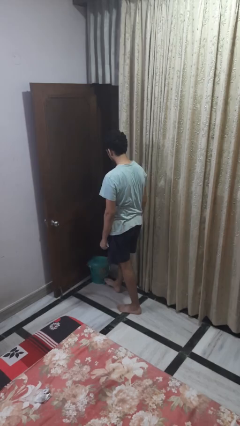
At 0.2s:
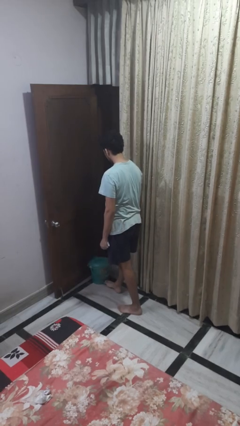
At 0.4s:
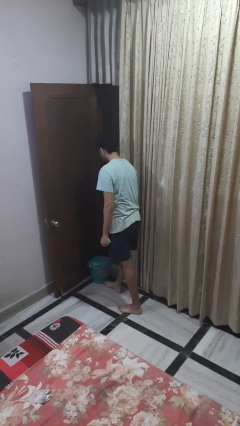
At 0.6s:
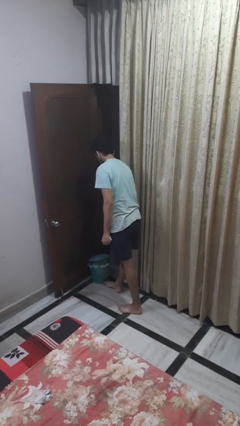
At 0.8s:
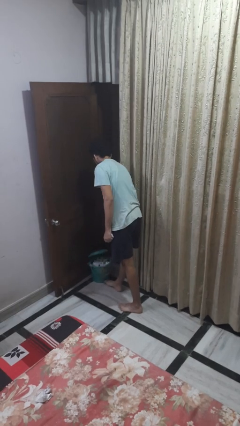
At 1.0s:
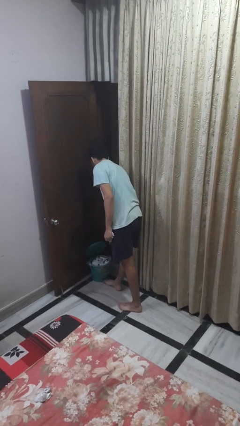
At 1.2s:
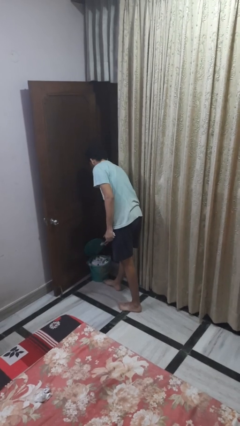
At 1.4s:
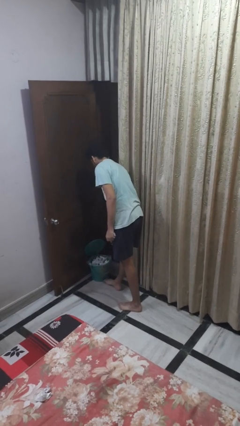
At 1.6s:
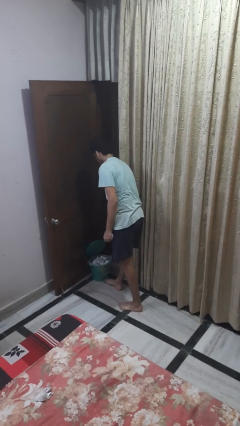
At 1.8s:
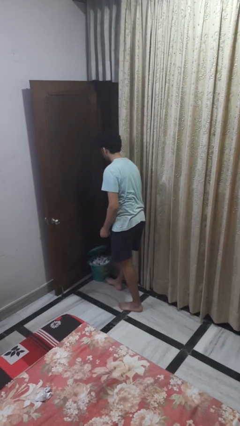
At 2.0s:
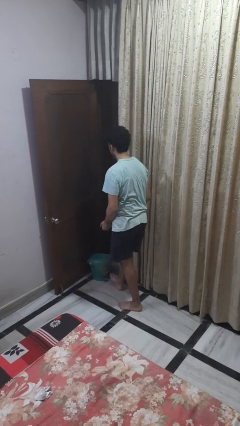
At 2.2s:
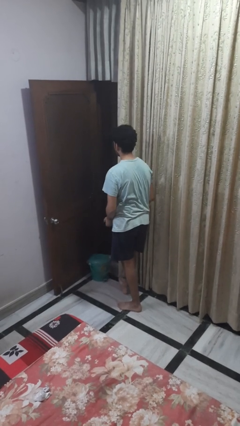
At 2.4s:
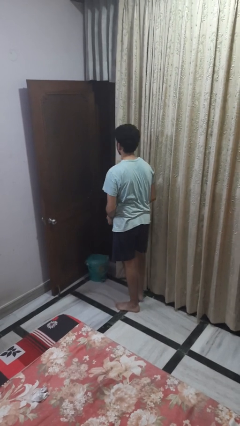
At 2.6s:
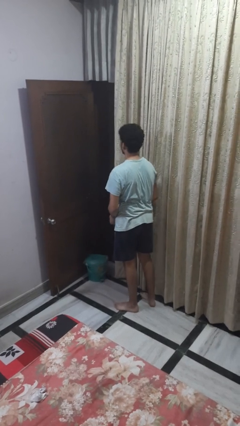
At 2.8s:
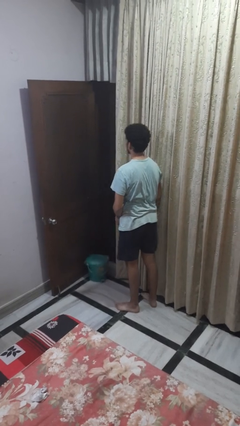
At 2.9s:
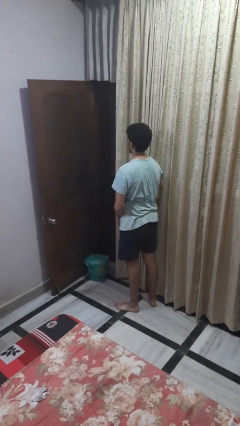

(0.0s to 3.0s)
person discards trash

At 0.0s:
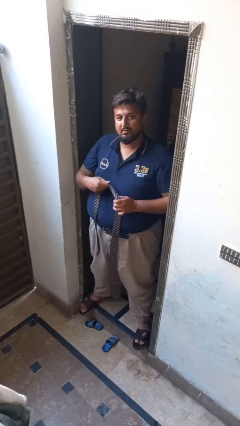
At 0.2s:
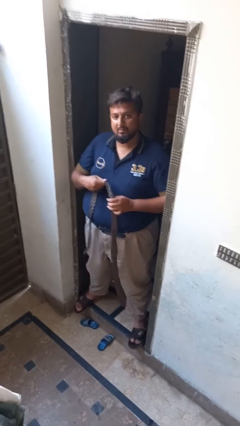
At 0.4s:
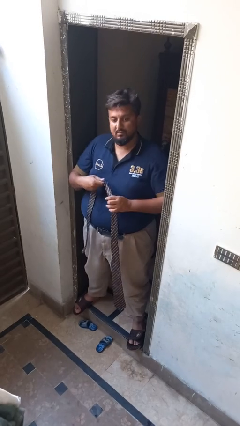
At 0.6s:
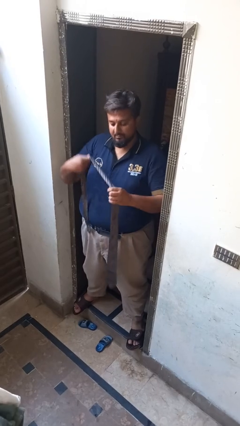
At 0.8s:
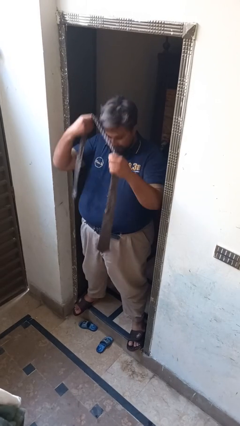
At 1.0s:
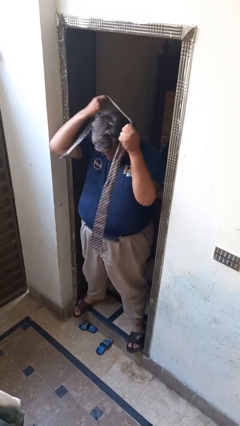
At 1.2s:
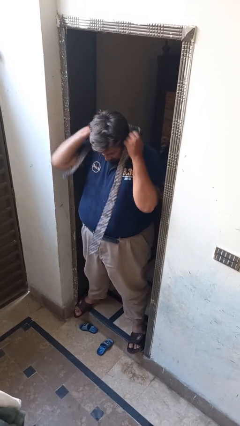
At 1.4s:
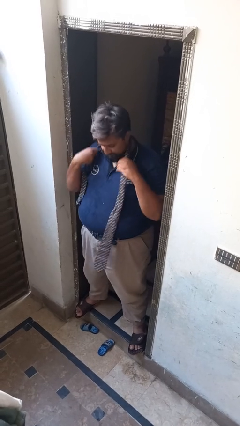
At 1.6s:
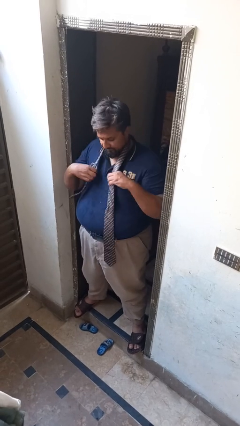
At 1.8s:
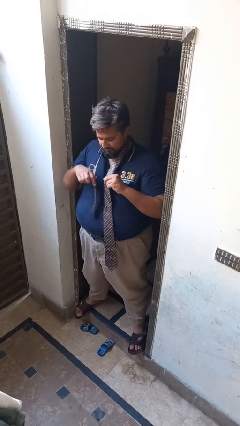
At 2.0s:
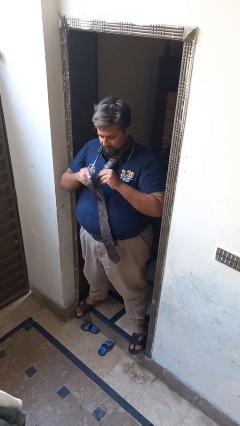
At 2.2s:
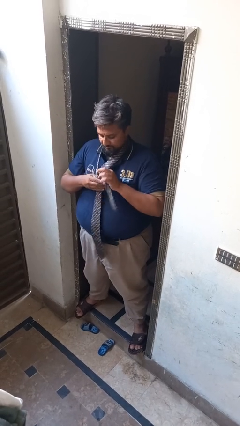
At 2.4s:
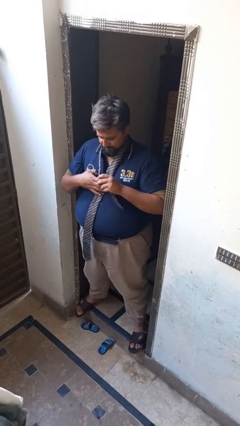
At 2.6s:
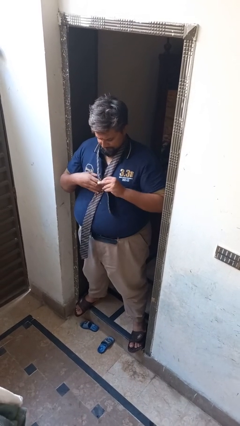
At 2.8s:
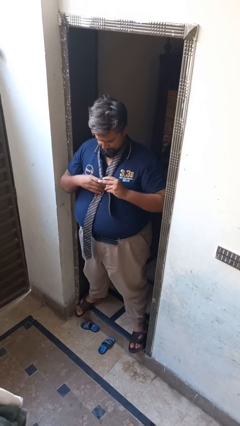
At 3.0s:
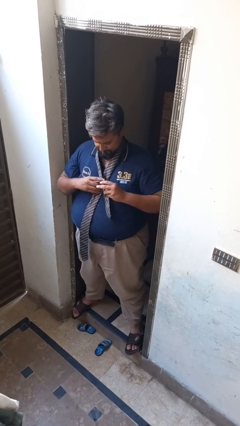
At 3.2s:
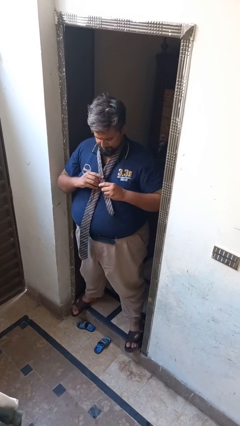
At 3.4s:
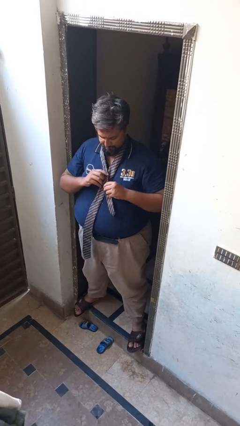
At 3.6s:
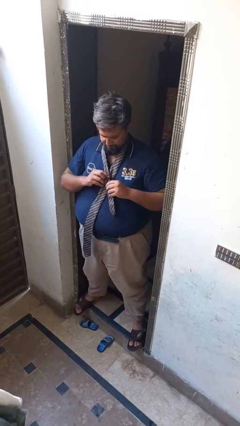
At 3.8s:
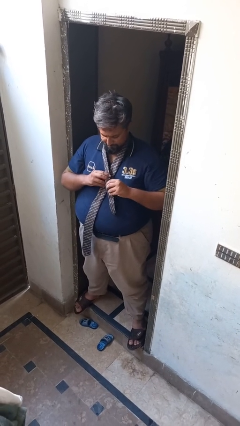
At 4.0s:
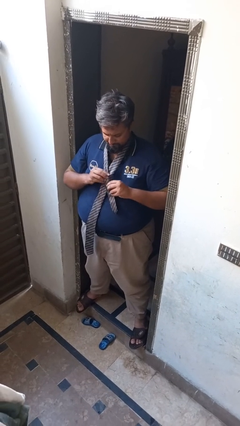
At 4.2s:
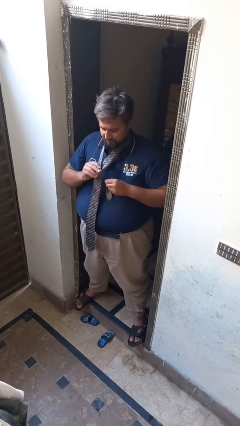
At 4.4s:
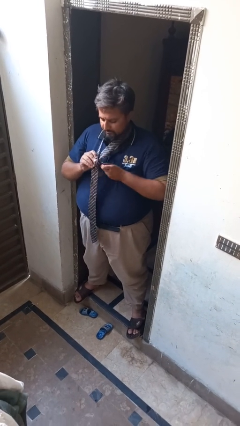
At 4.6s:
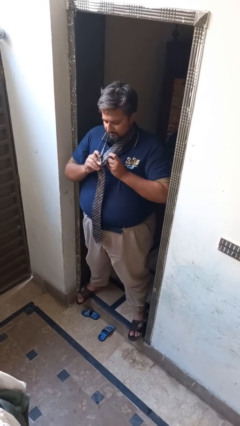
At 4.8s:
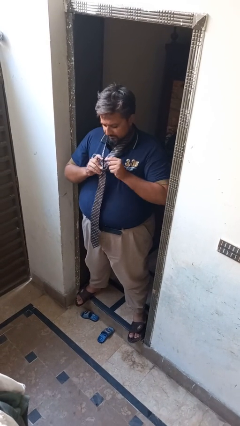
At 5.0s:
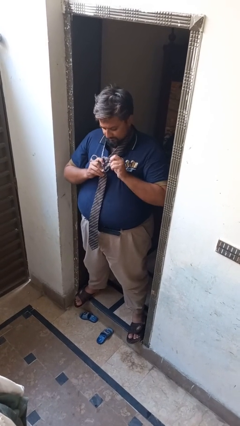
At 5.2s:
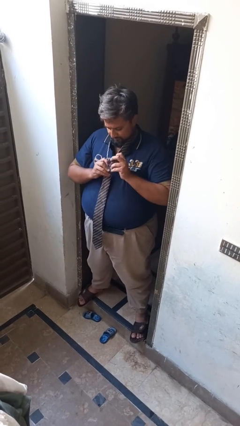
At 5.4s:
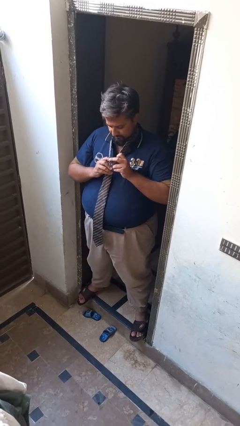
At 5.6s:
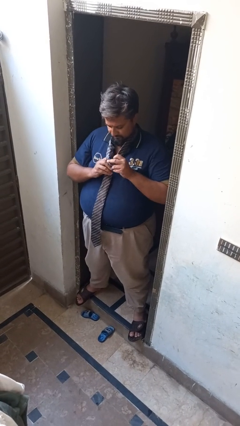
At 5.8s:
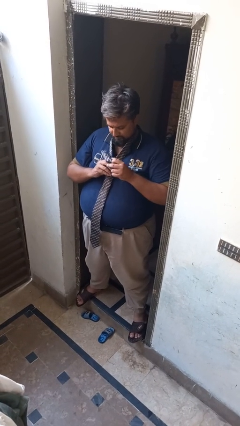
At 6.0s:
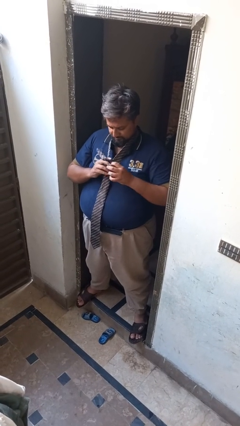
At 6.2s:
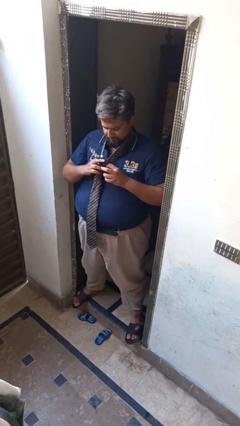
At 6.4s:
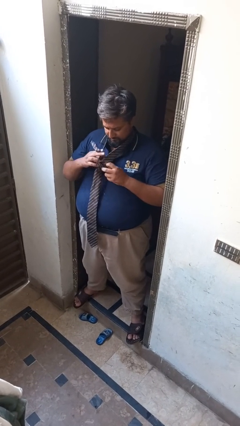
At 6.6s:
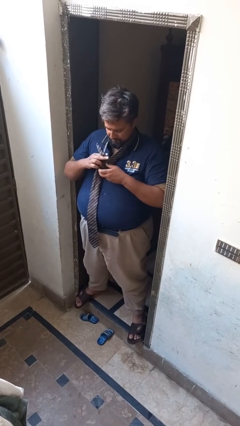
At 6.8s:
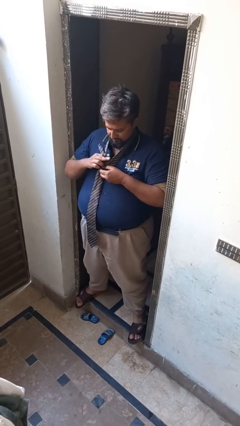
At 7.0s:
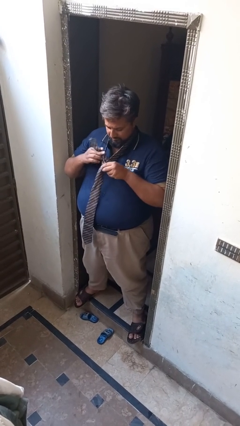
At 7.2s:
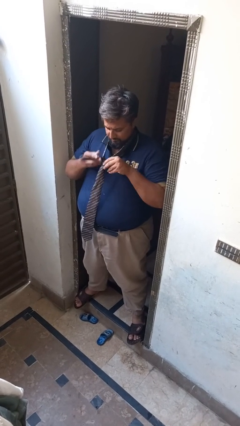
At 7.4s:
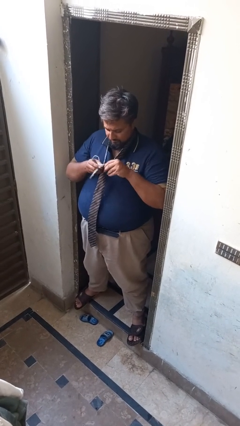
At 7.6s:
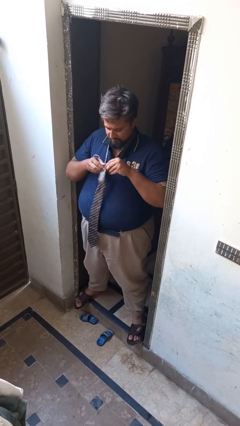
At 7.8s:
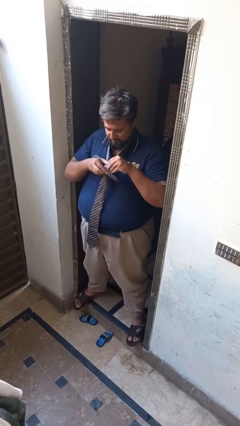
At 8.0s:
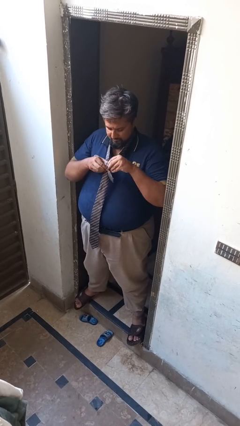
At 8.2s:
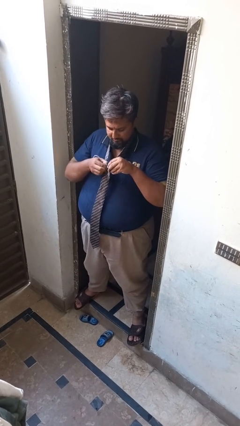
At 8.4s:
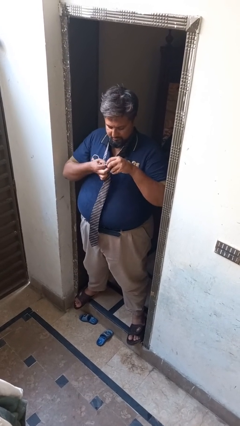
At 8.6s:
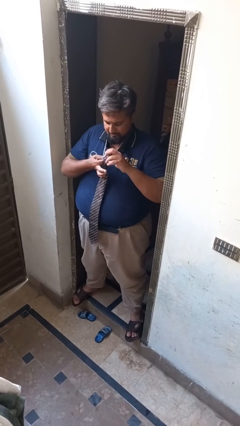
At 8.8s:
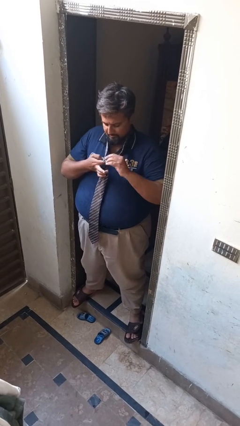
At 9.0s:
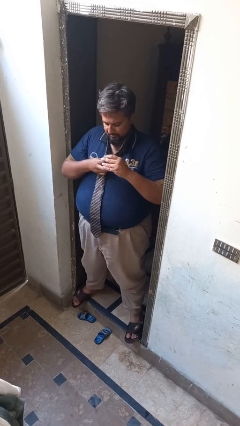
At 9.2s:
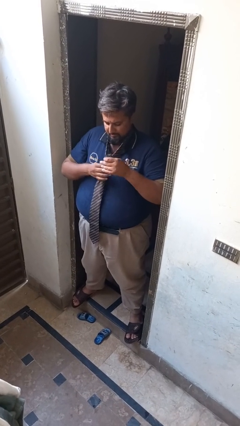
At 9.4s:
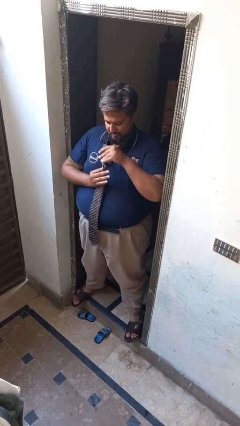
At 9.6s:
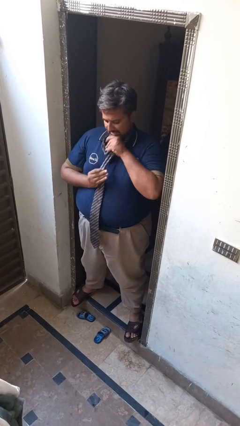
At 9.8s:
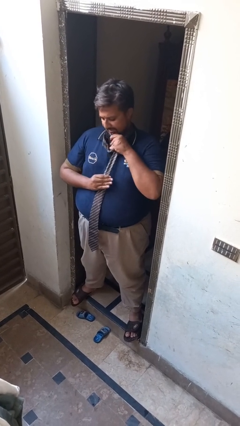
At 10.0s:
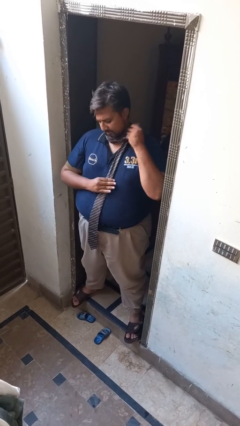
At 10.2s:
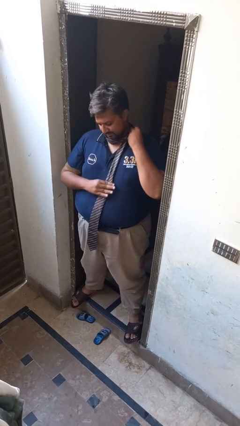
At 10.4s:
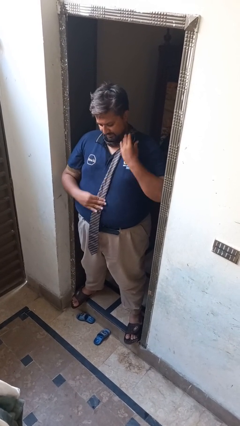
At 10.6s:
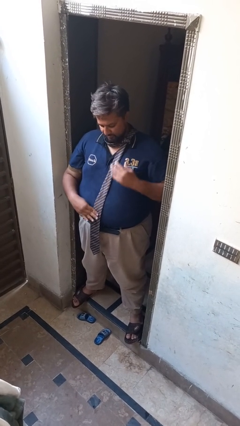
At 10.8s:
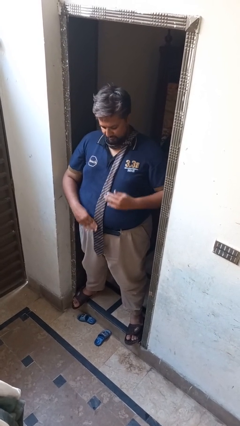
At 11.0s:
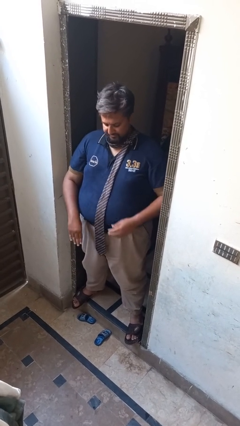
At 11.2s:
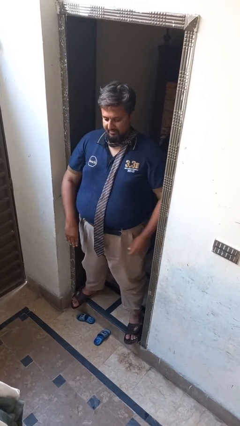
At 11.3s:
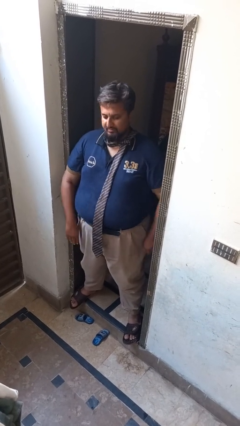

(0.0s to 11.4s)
person puts on necktie

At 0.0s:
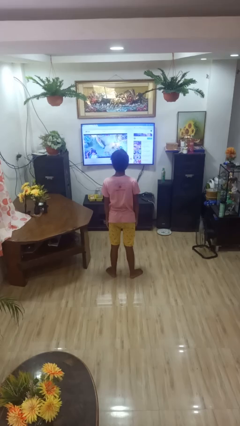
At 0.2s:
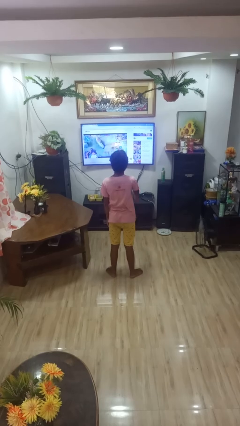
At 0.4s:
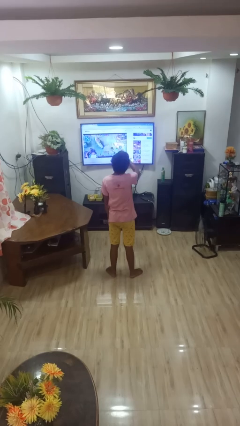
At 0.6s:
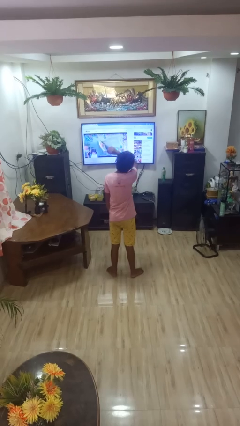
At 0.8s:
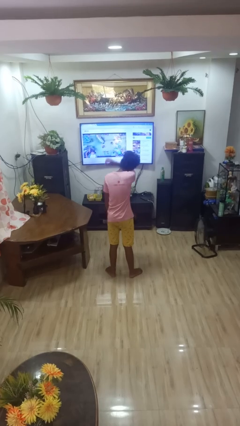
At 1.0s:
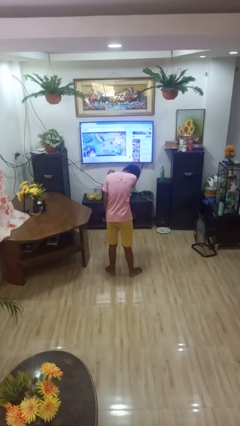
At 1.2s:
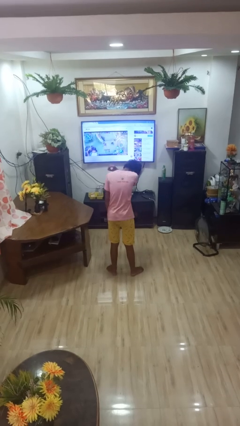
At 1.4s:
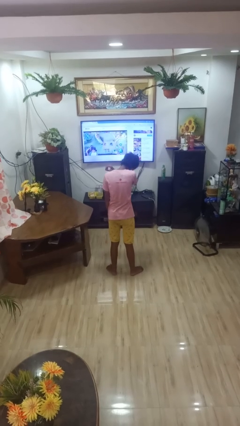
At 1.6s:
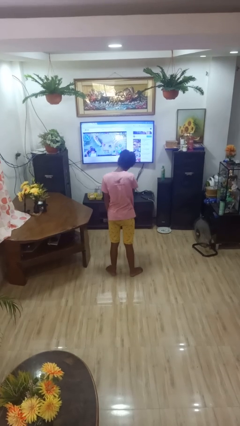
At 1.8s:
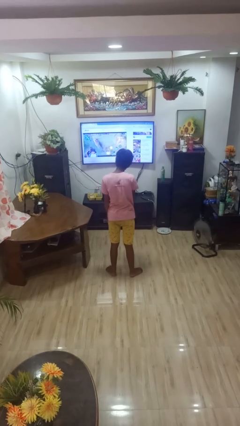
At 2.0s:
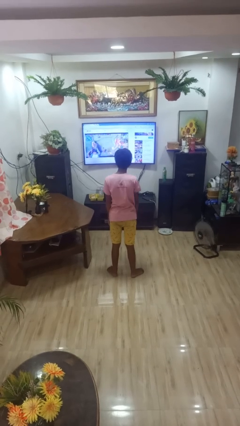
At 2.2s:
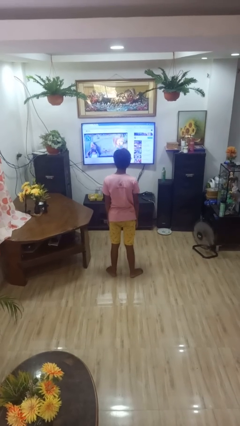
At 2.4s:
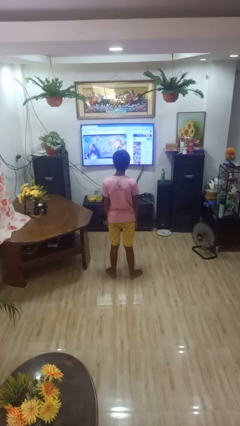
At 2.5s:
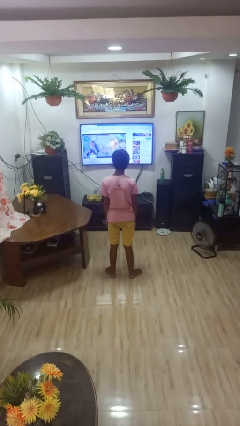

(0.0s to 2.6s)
person sneezes into arm

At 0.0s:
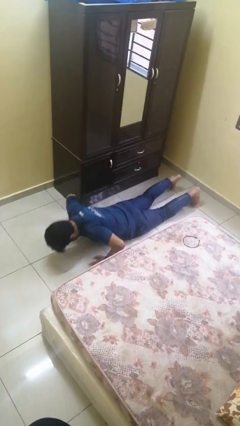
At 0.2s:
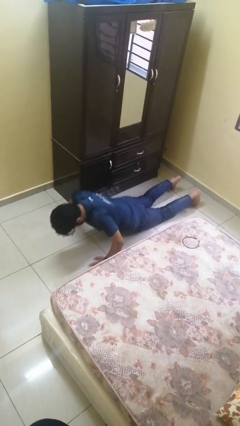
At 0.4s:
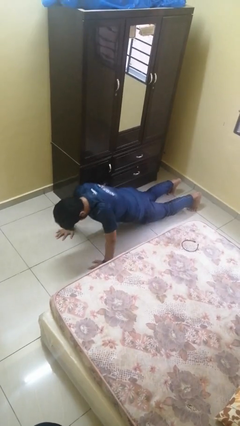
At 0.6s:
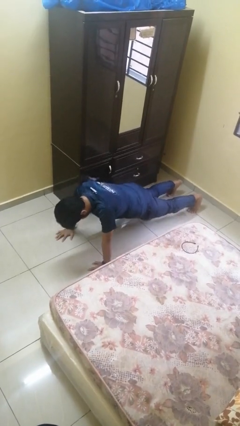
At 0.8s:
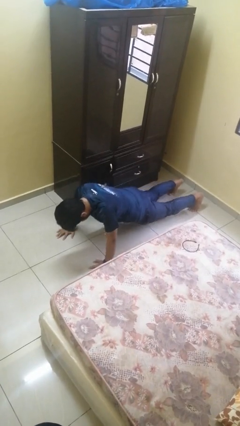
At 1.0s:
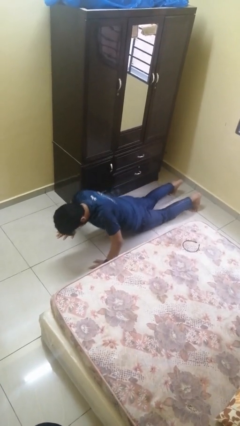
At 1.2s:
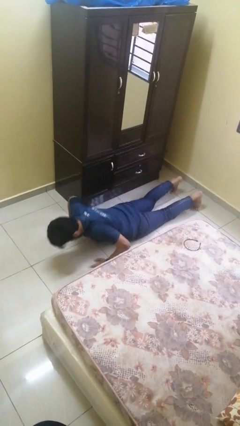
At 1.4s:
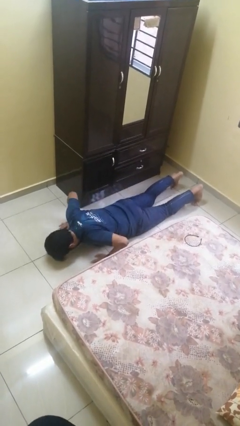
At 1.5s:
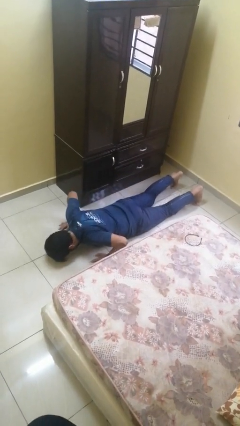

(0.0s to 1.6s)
person exercises with pushup
